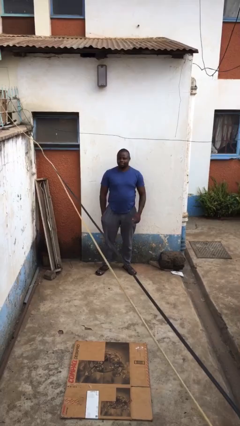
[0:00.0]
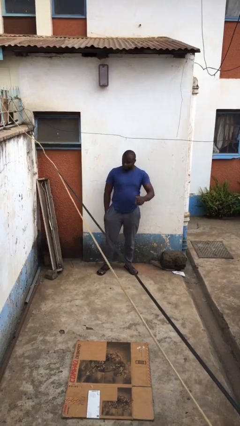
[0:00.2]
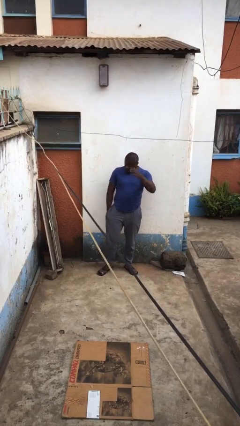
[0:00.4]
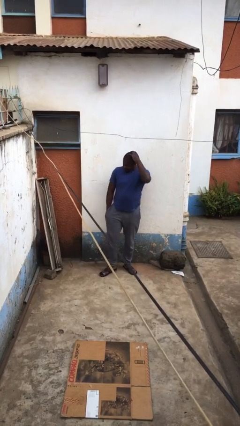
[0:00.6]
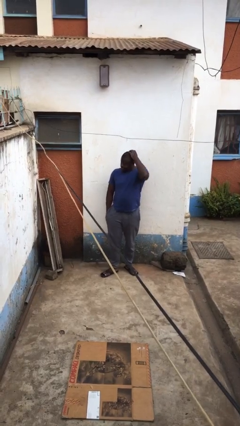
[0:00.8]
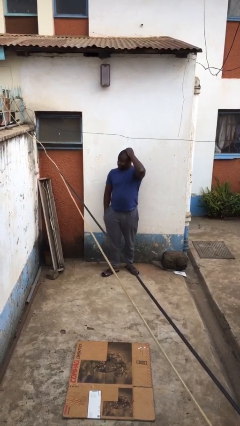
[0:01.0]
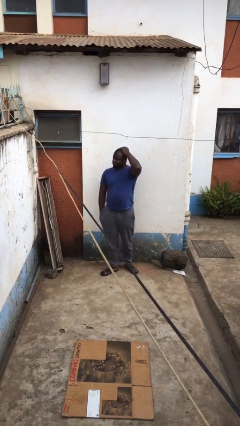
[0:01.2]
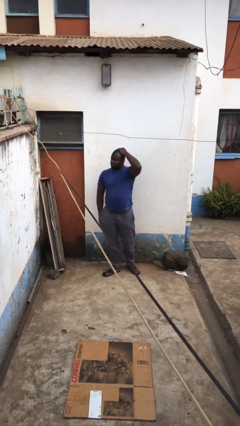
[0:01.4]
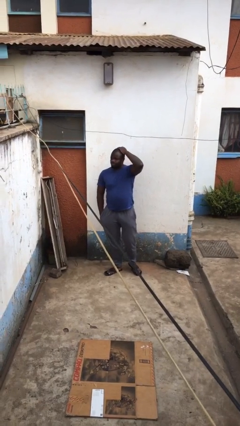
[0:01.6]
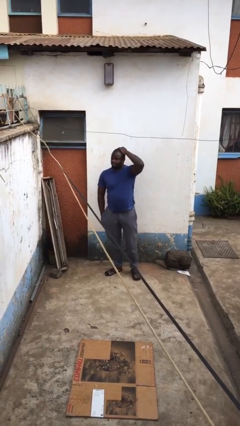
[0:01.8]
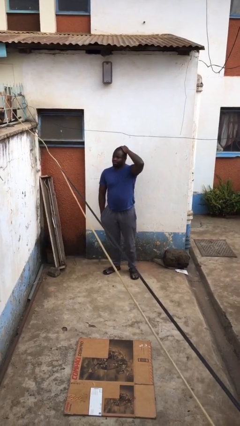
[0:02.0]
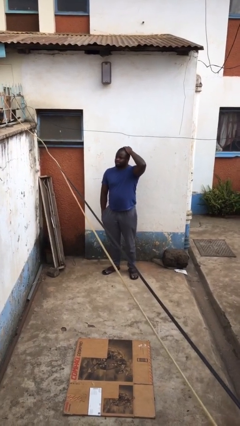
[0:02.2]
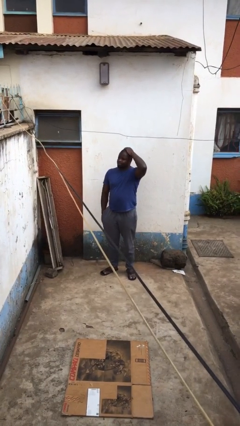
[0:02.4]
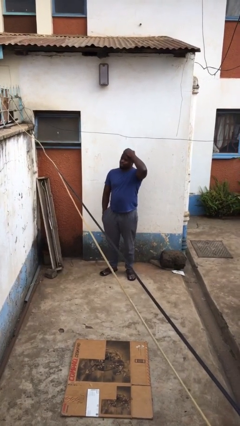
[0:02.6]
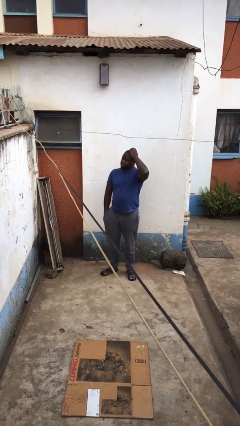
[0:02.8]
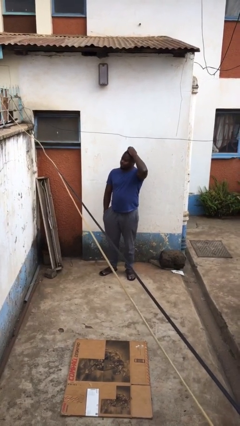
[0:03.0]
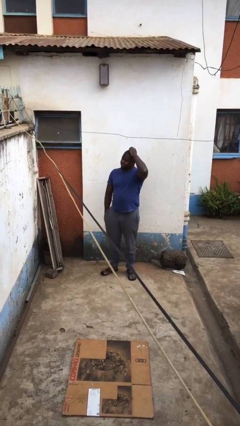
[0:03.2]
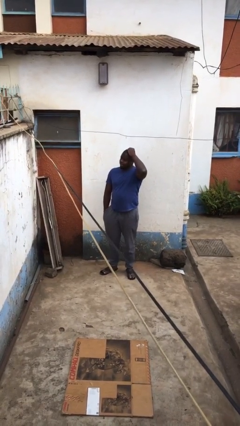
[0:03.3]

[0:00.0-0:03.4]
person scratches face

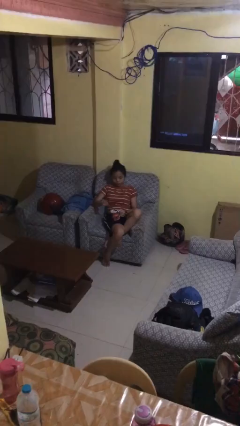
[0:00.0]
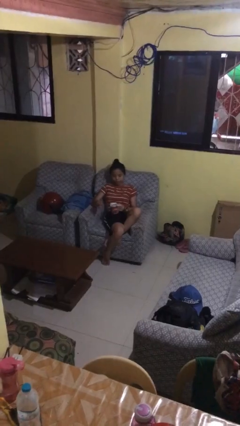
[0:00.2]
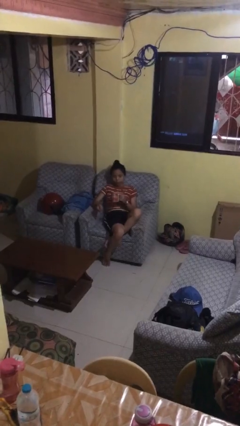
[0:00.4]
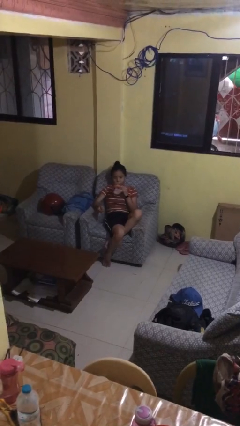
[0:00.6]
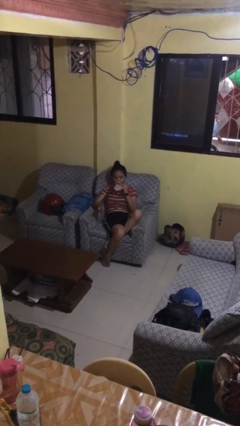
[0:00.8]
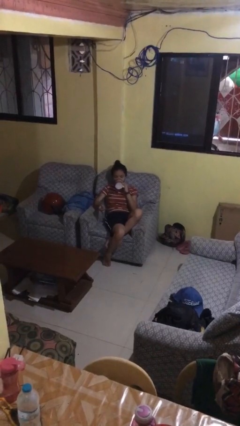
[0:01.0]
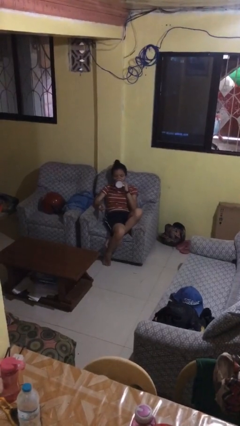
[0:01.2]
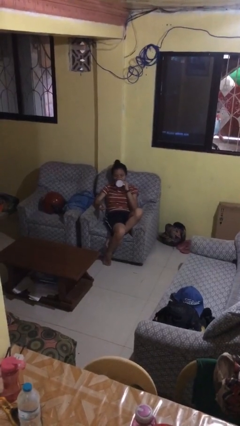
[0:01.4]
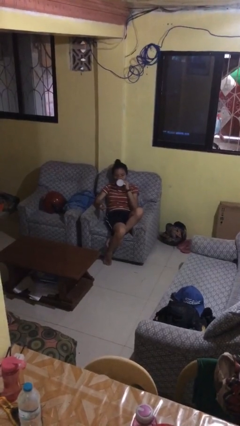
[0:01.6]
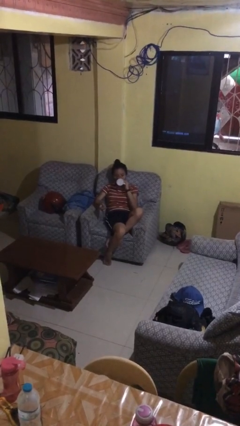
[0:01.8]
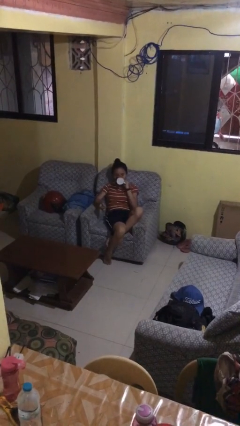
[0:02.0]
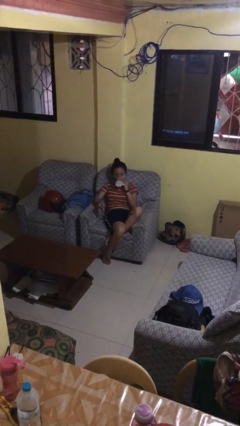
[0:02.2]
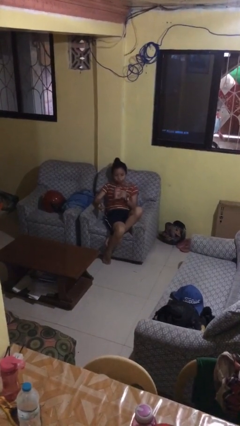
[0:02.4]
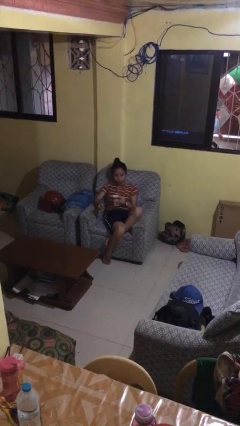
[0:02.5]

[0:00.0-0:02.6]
person drinks from mug

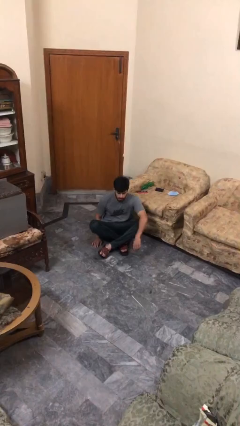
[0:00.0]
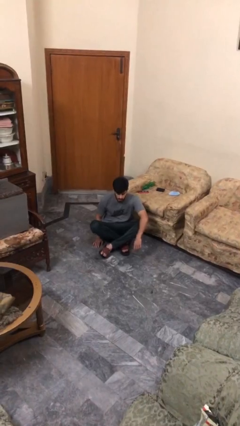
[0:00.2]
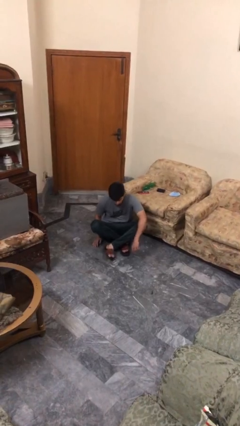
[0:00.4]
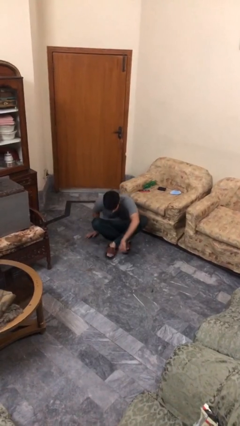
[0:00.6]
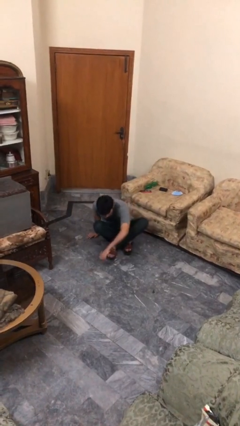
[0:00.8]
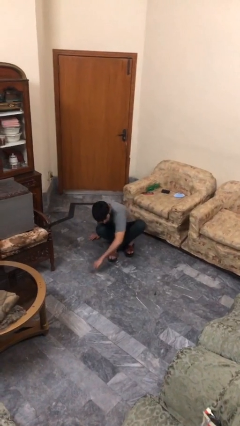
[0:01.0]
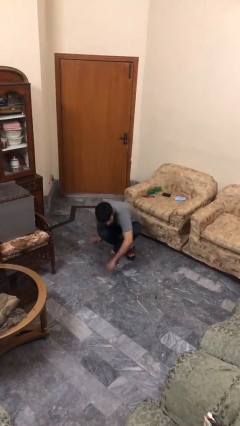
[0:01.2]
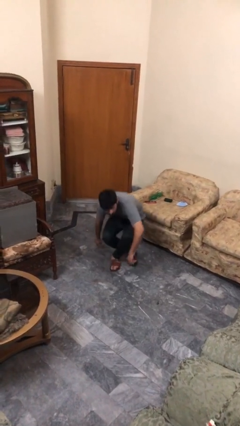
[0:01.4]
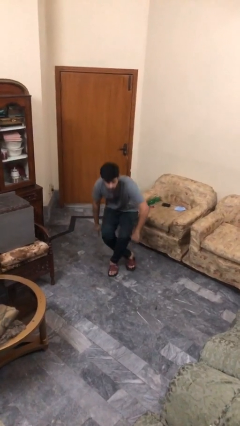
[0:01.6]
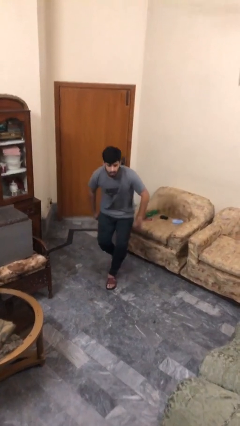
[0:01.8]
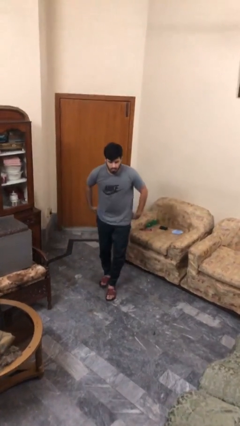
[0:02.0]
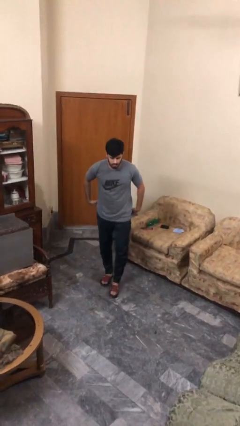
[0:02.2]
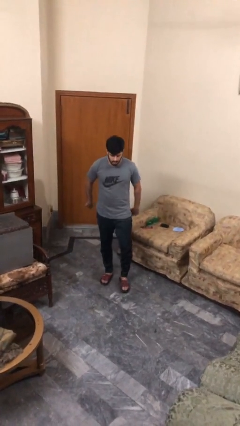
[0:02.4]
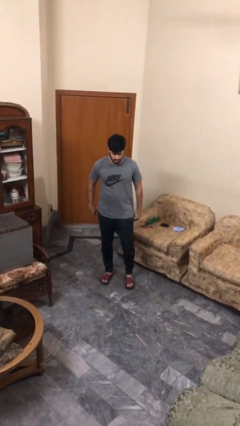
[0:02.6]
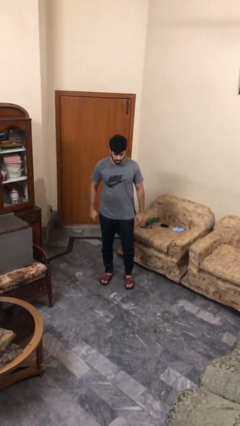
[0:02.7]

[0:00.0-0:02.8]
person stands up from floor

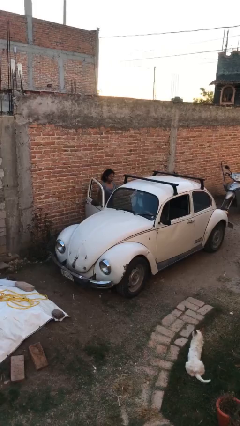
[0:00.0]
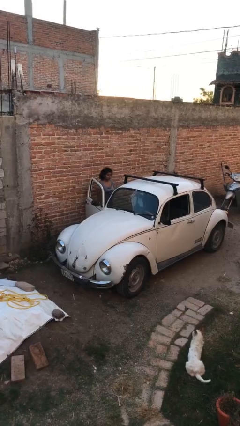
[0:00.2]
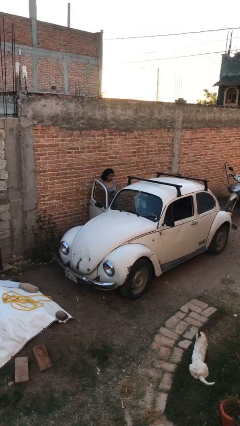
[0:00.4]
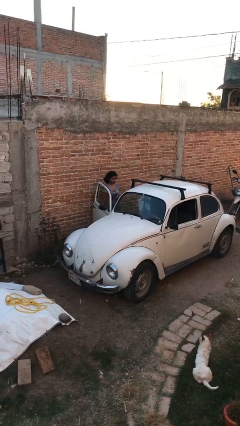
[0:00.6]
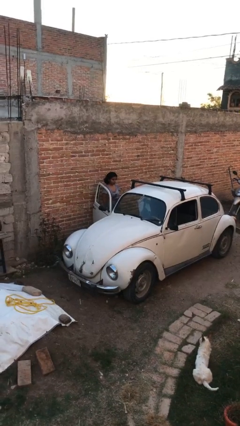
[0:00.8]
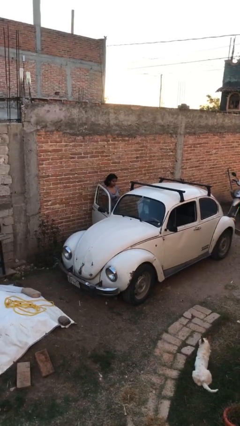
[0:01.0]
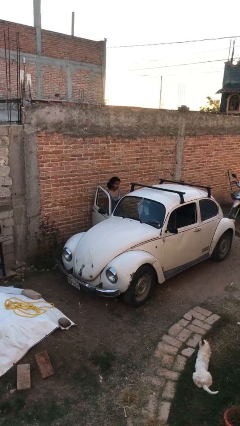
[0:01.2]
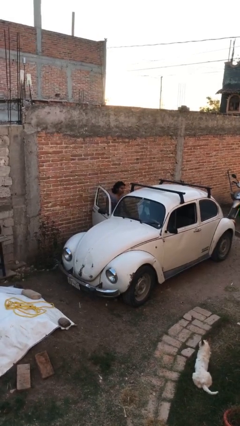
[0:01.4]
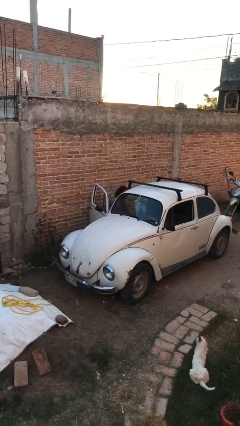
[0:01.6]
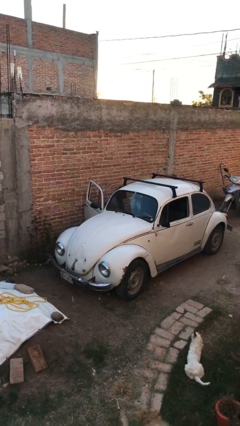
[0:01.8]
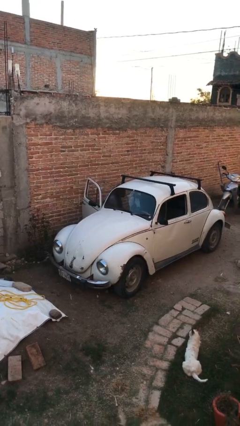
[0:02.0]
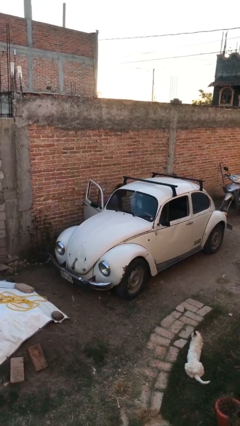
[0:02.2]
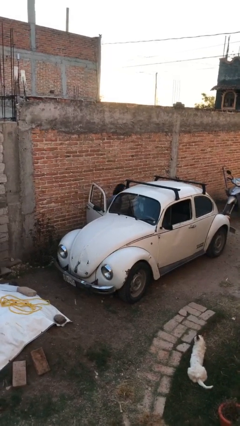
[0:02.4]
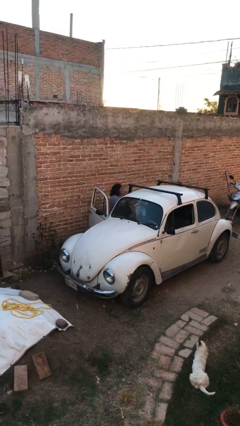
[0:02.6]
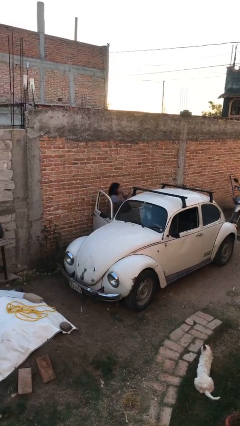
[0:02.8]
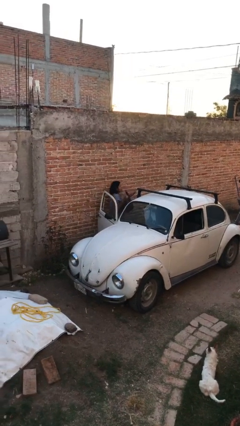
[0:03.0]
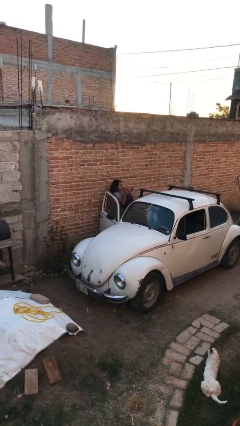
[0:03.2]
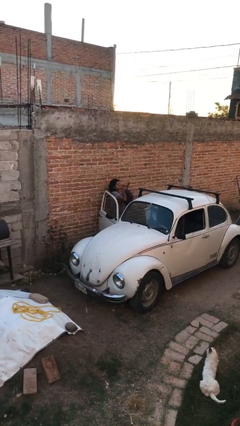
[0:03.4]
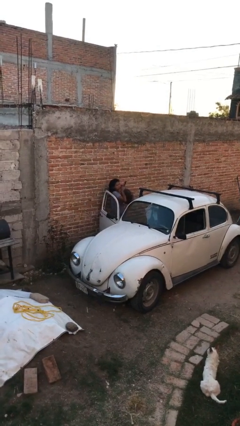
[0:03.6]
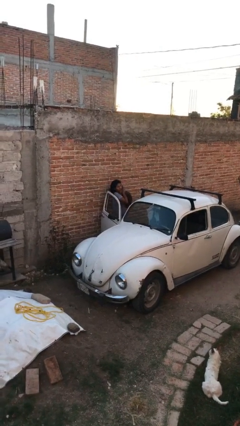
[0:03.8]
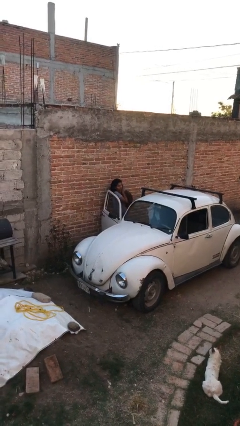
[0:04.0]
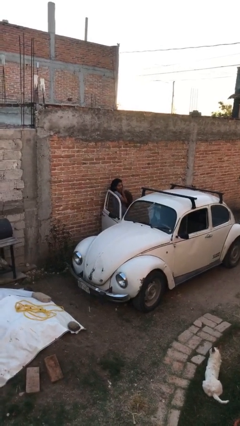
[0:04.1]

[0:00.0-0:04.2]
person unloads car

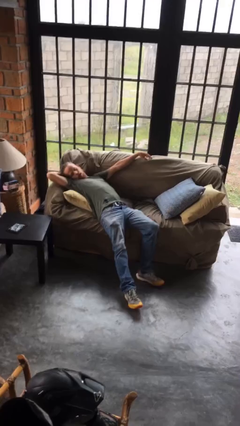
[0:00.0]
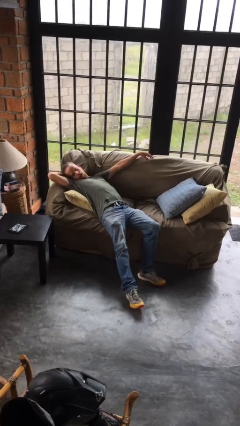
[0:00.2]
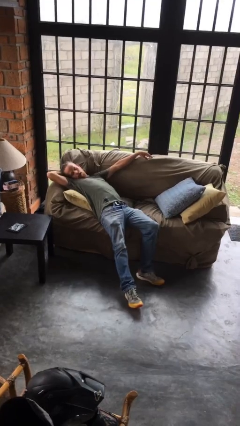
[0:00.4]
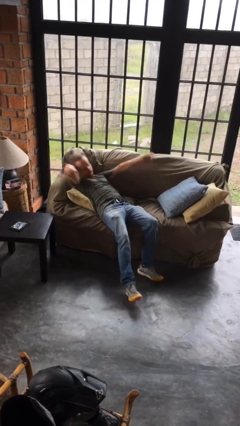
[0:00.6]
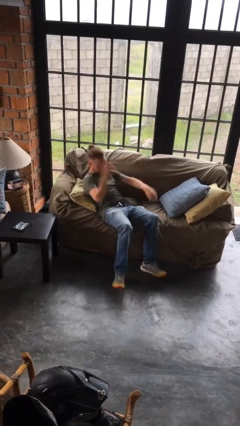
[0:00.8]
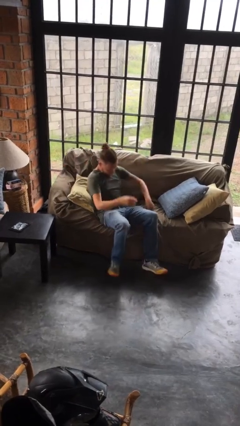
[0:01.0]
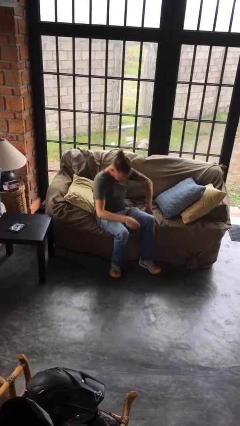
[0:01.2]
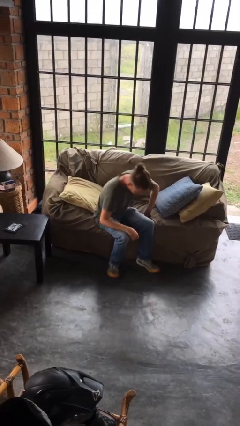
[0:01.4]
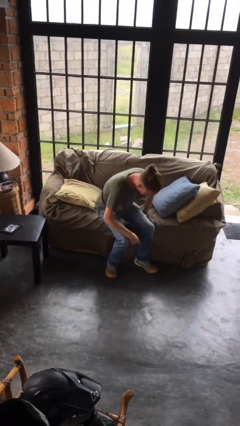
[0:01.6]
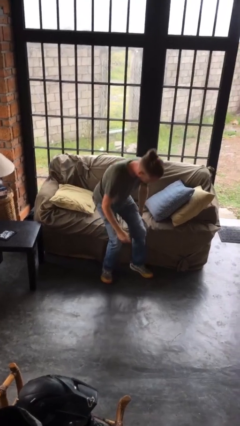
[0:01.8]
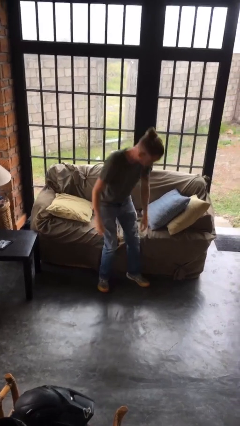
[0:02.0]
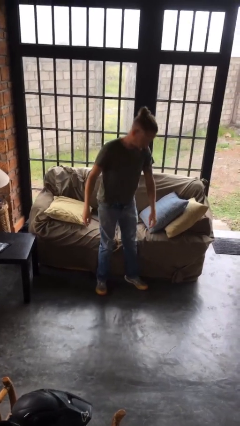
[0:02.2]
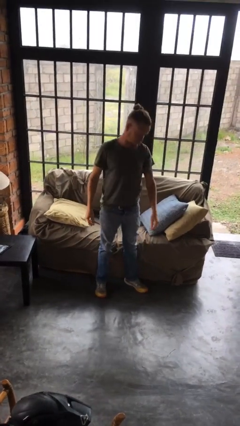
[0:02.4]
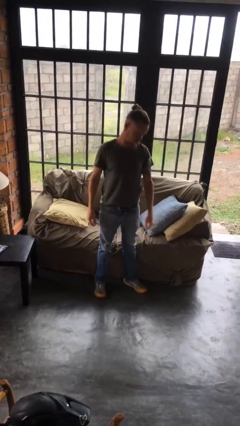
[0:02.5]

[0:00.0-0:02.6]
person stands up

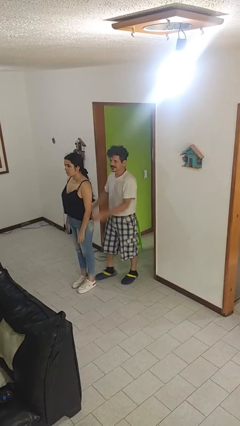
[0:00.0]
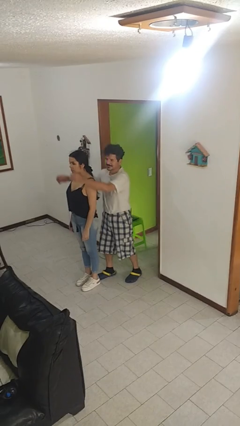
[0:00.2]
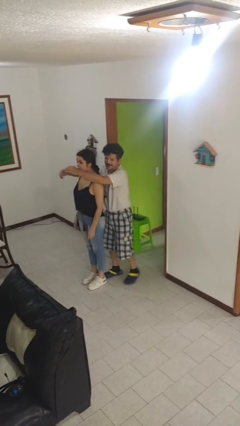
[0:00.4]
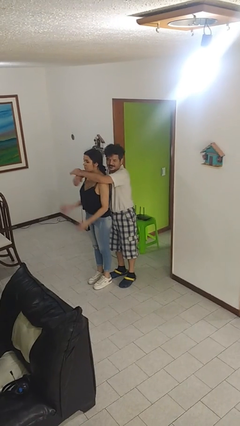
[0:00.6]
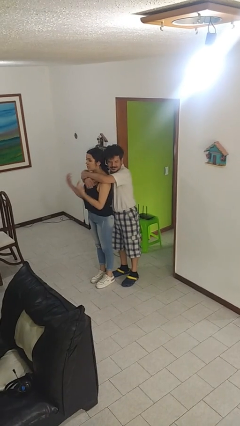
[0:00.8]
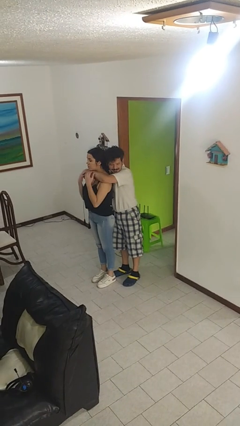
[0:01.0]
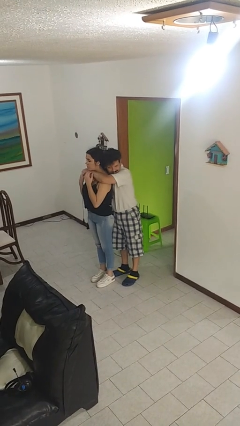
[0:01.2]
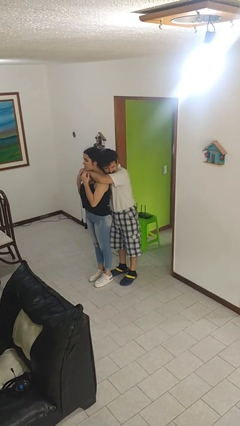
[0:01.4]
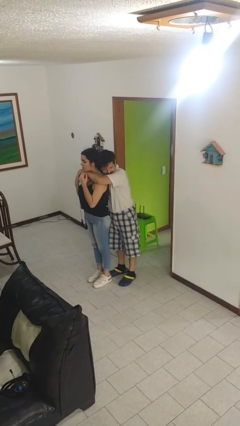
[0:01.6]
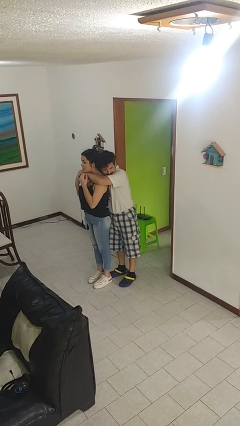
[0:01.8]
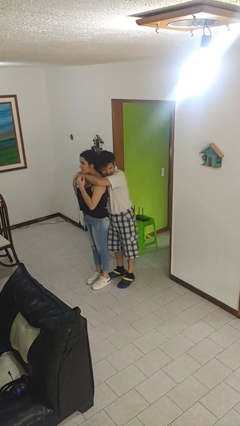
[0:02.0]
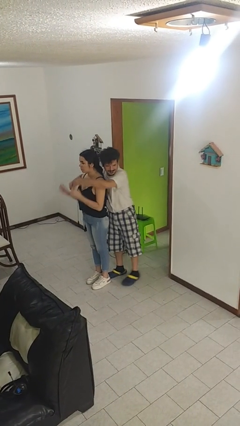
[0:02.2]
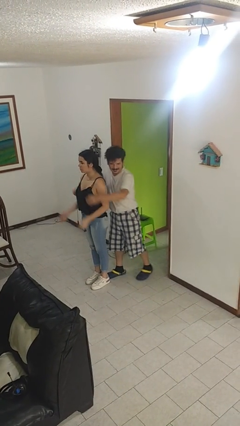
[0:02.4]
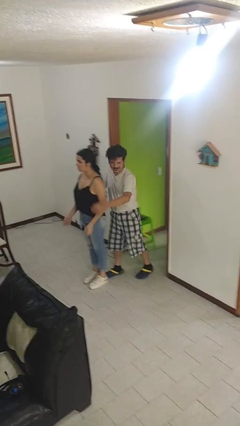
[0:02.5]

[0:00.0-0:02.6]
person hugs person from behind
